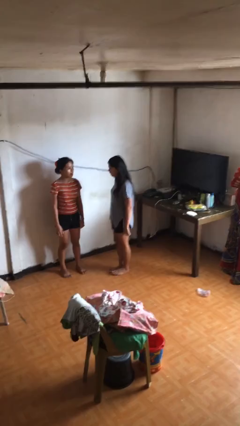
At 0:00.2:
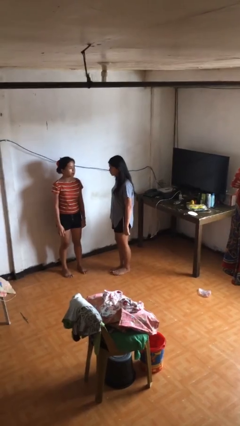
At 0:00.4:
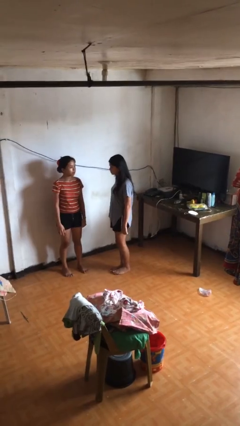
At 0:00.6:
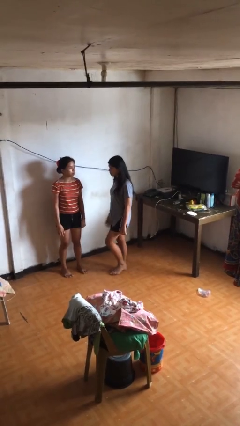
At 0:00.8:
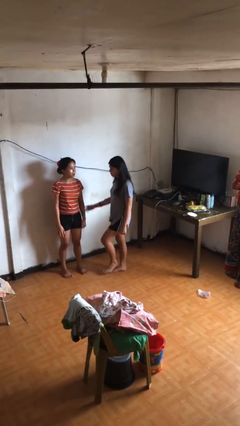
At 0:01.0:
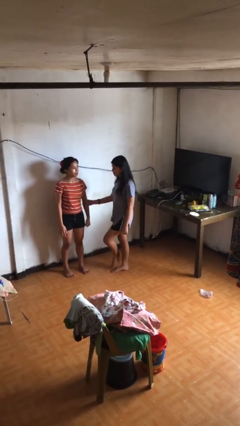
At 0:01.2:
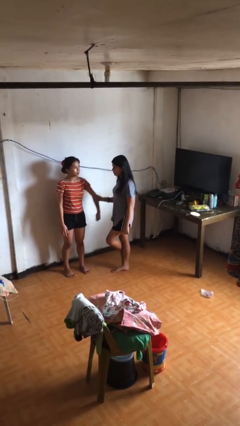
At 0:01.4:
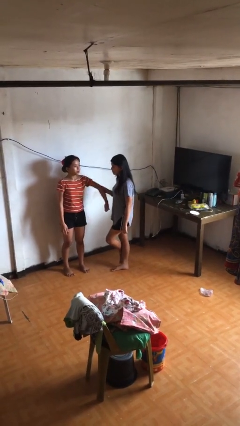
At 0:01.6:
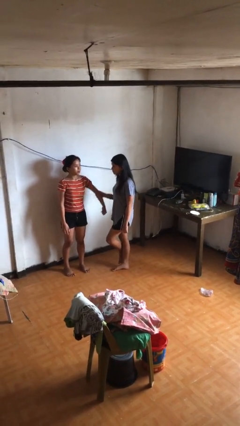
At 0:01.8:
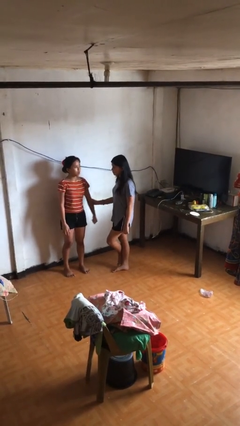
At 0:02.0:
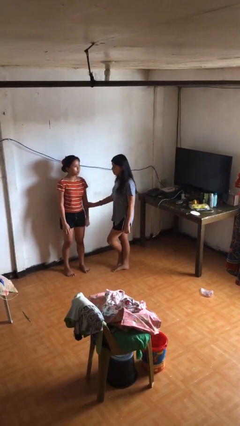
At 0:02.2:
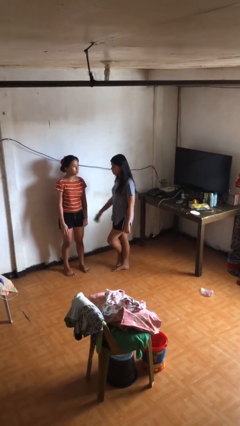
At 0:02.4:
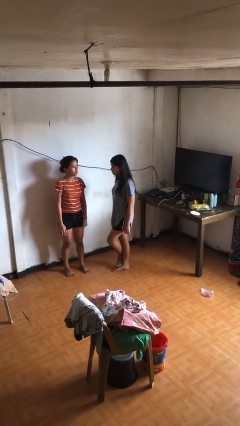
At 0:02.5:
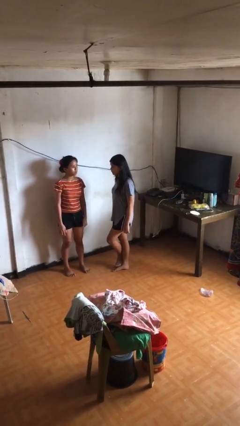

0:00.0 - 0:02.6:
person grabs person by forearm

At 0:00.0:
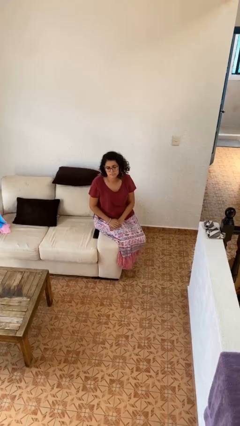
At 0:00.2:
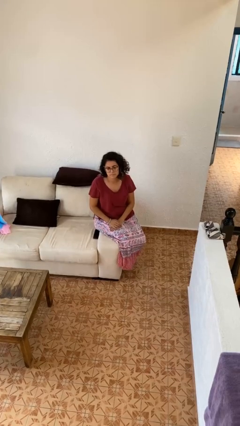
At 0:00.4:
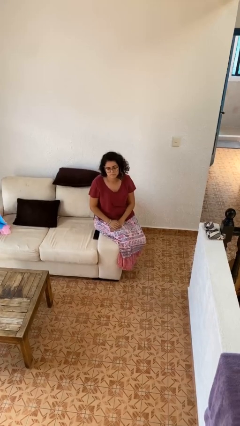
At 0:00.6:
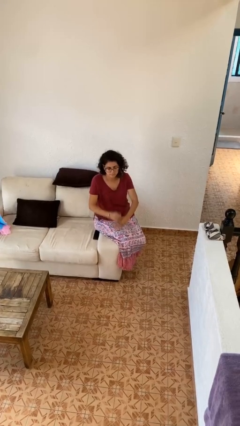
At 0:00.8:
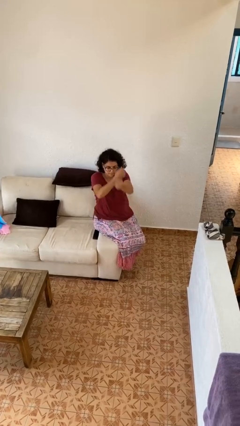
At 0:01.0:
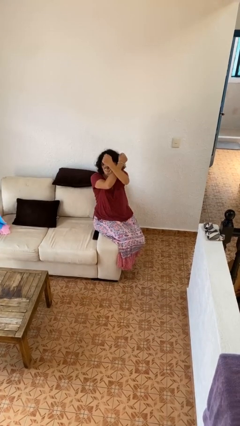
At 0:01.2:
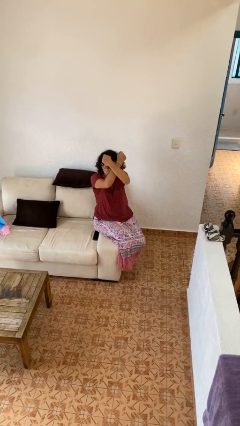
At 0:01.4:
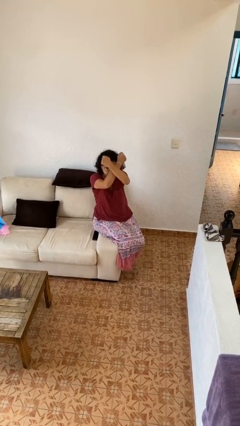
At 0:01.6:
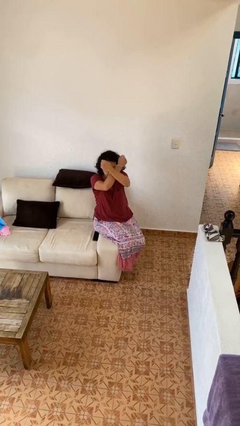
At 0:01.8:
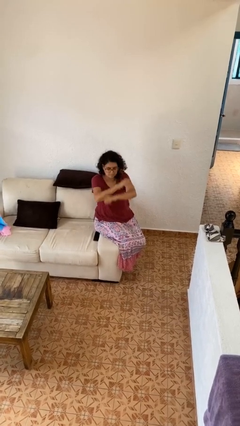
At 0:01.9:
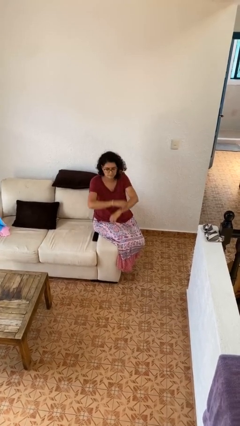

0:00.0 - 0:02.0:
person gestures arms x

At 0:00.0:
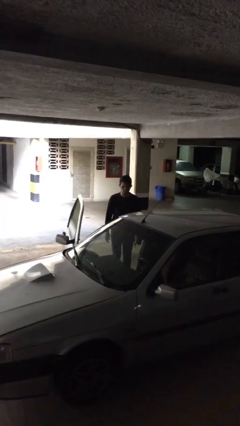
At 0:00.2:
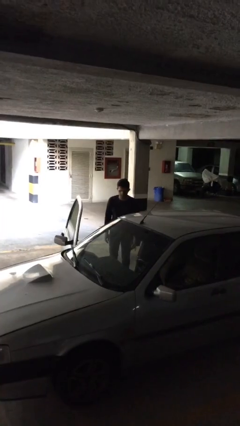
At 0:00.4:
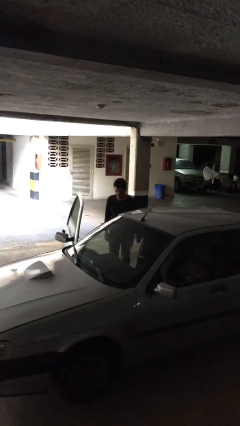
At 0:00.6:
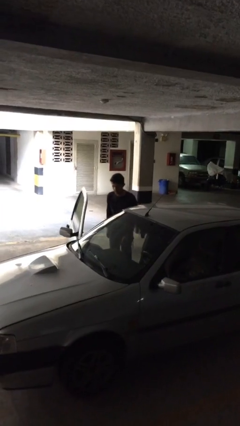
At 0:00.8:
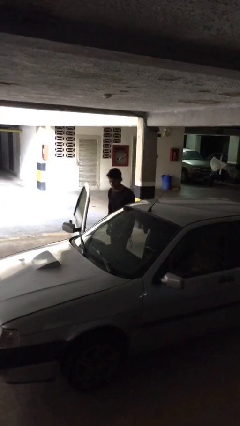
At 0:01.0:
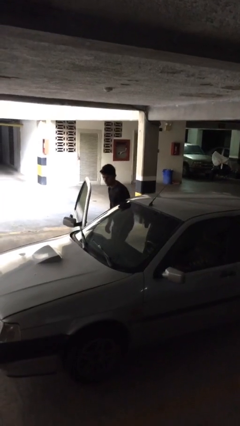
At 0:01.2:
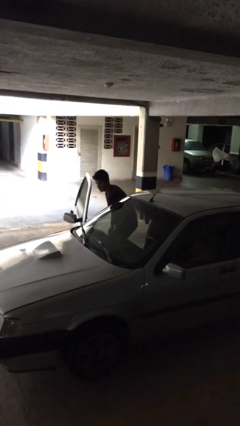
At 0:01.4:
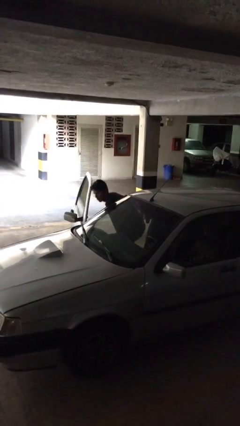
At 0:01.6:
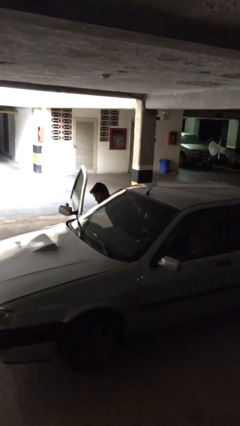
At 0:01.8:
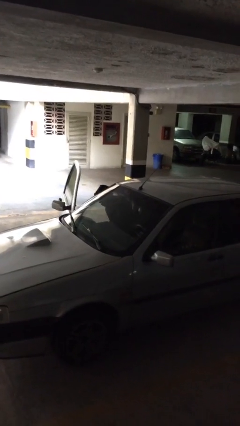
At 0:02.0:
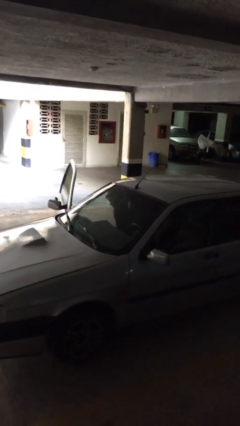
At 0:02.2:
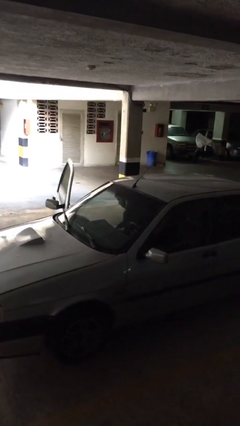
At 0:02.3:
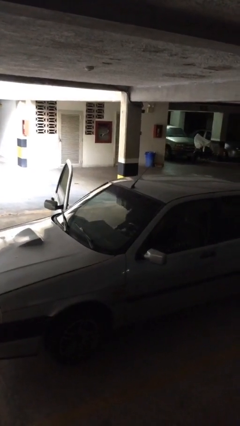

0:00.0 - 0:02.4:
person enters car

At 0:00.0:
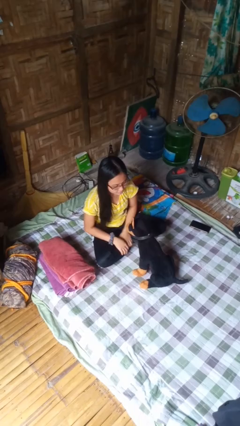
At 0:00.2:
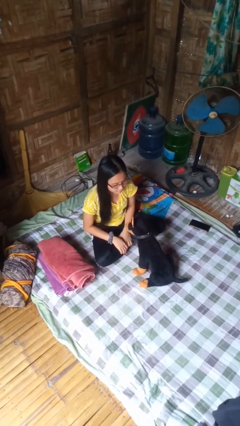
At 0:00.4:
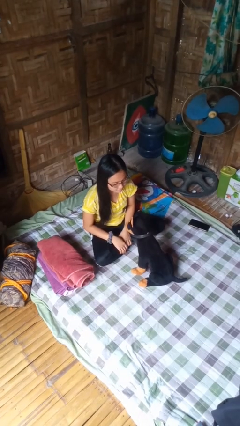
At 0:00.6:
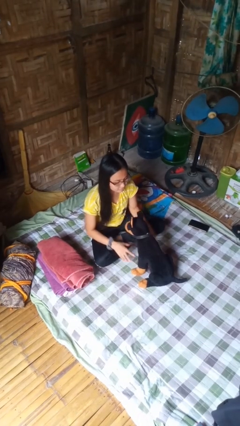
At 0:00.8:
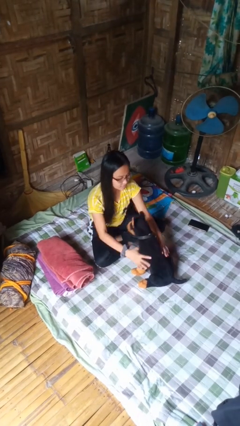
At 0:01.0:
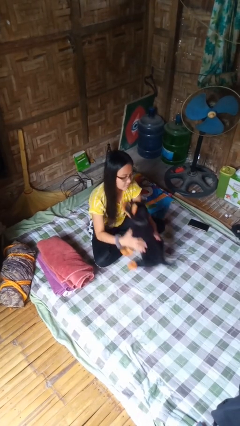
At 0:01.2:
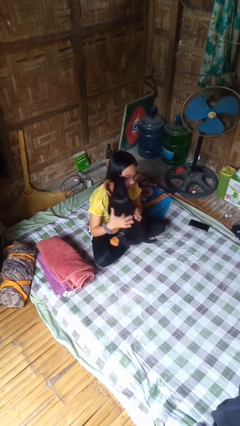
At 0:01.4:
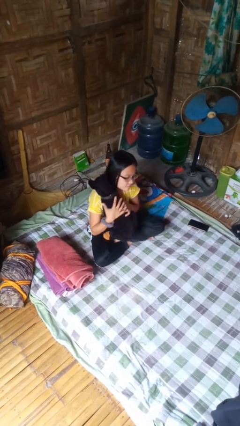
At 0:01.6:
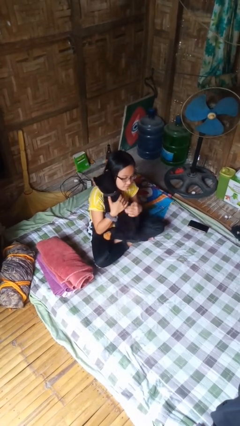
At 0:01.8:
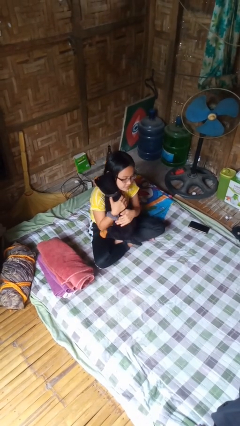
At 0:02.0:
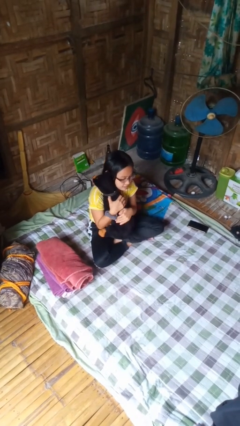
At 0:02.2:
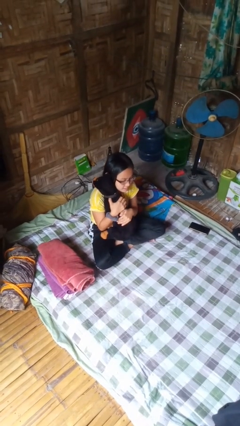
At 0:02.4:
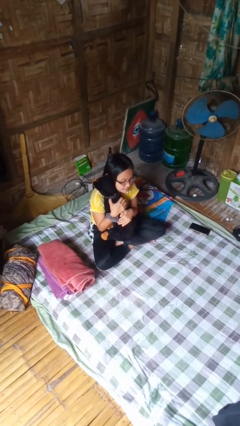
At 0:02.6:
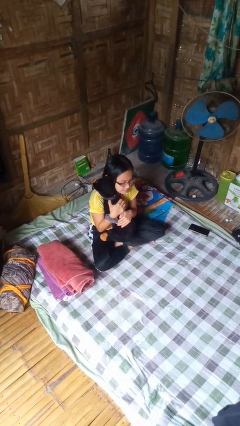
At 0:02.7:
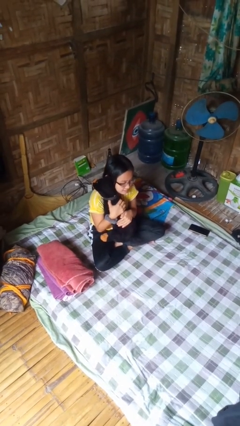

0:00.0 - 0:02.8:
person hugs stuffed animal

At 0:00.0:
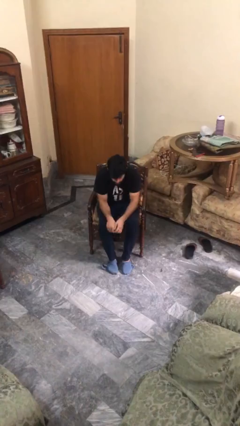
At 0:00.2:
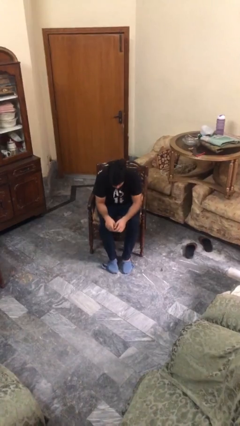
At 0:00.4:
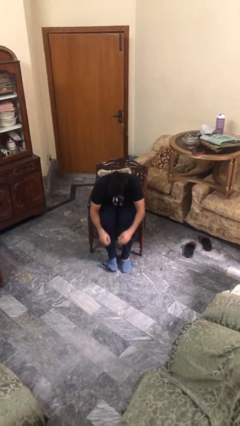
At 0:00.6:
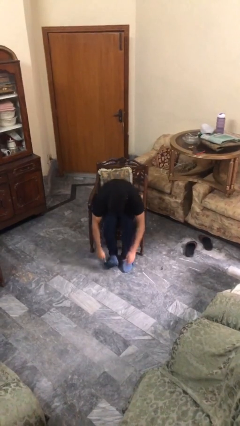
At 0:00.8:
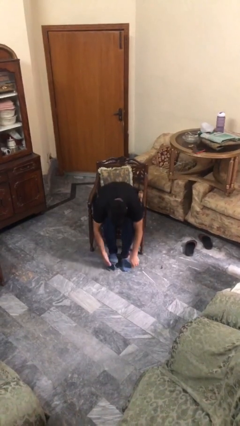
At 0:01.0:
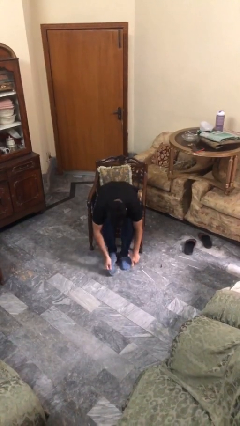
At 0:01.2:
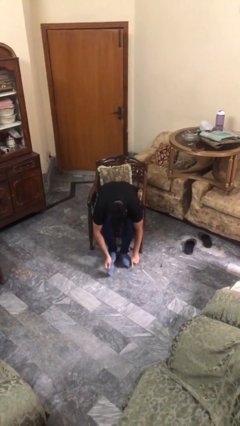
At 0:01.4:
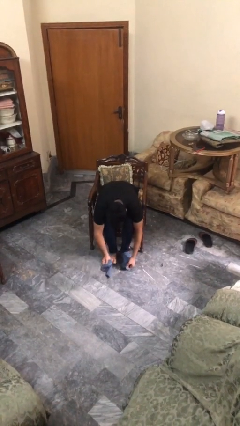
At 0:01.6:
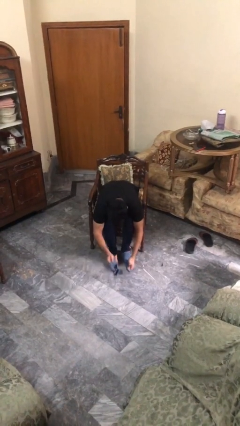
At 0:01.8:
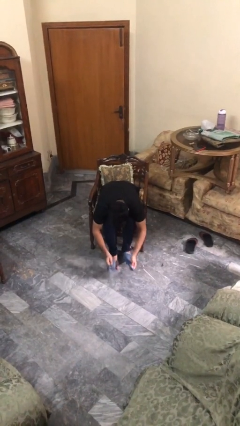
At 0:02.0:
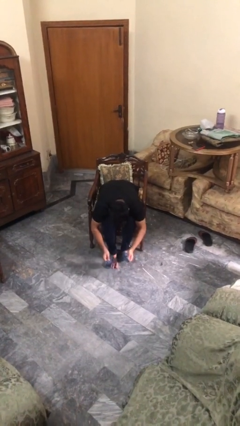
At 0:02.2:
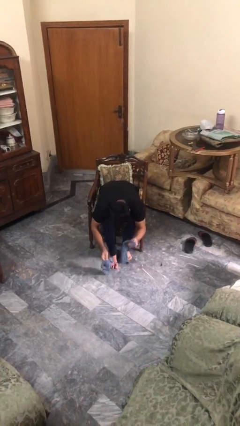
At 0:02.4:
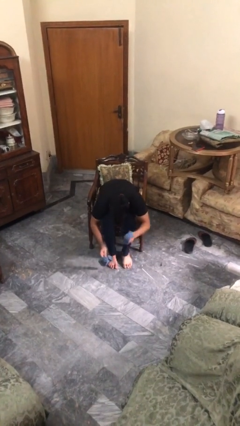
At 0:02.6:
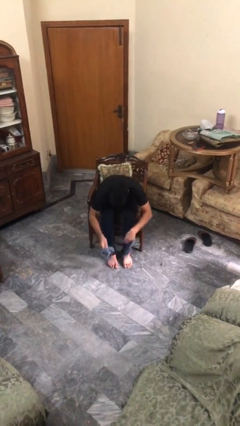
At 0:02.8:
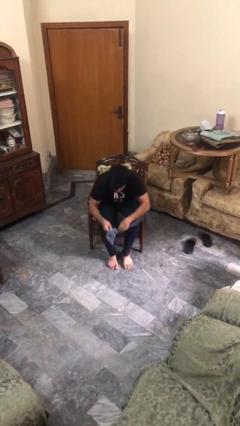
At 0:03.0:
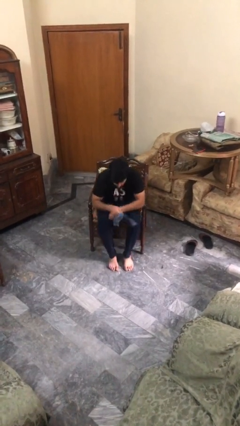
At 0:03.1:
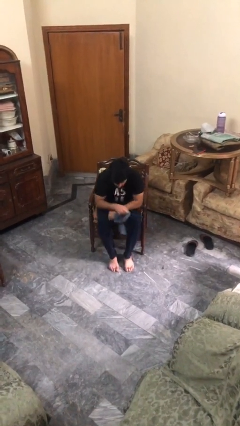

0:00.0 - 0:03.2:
person takes off socks

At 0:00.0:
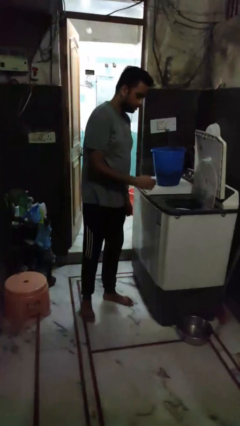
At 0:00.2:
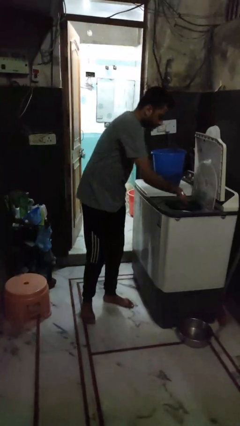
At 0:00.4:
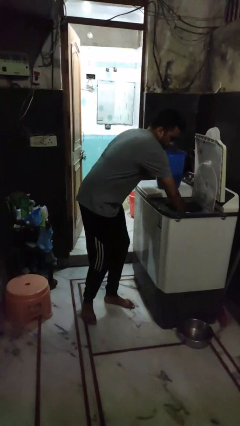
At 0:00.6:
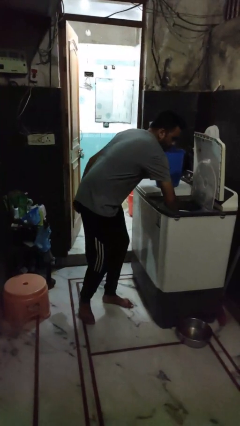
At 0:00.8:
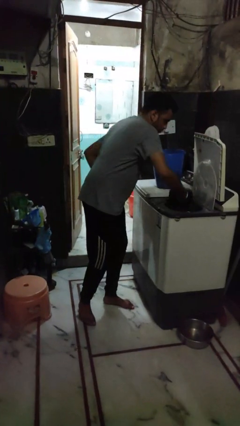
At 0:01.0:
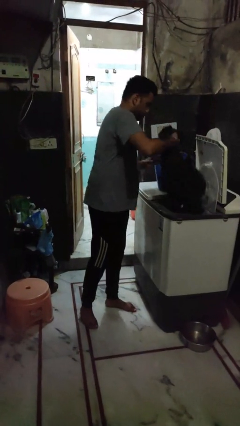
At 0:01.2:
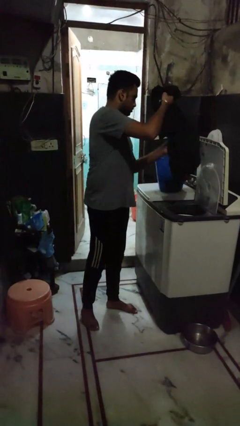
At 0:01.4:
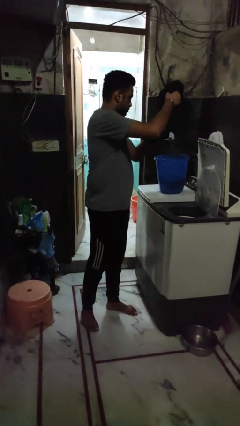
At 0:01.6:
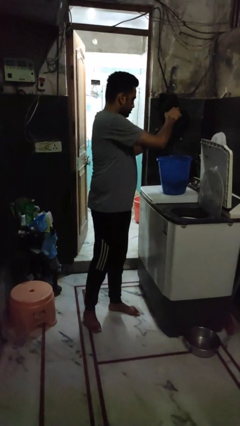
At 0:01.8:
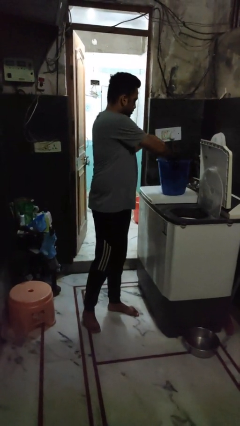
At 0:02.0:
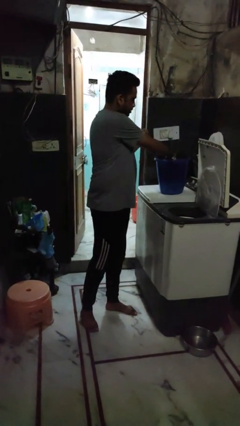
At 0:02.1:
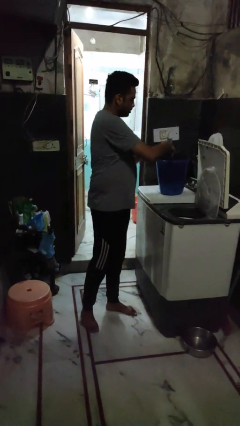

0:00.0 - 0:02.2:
person unloads dryer

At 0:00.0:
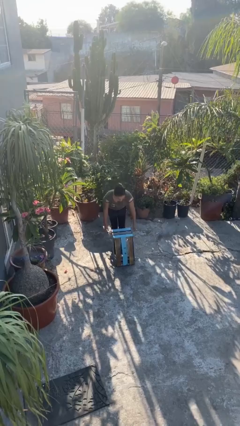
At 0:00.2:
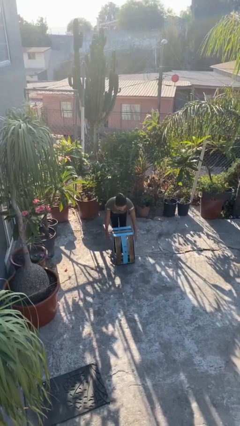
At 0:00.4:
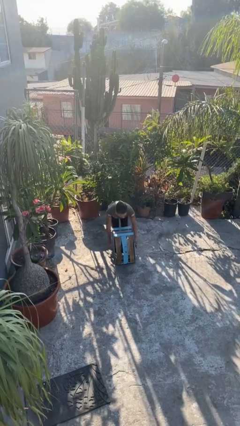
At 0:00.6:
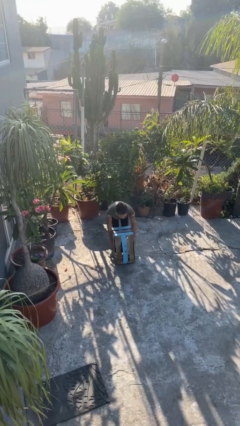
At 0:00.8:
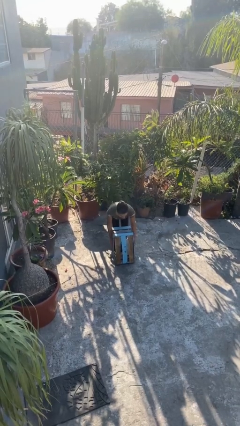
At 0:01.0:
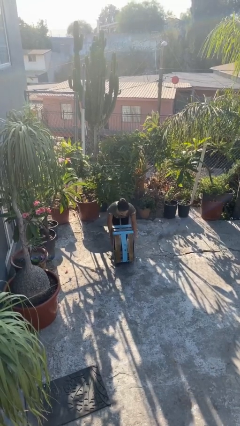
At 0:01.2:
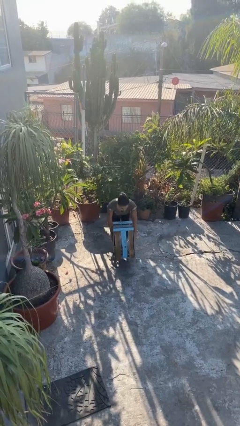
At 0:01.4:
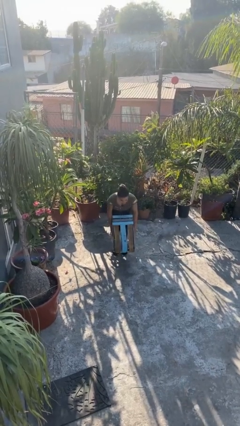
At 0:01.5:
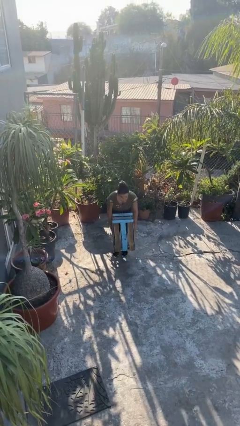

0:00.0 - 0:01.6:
person picks up object from floor
